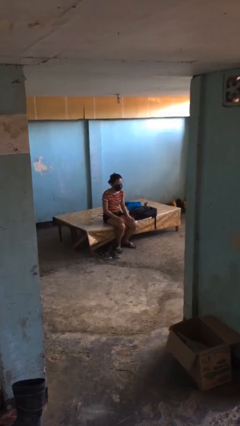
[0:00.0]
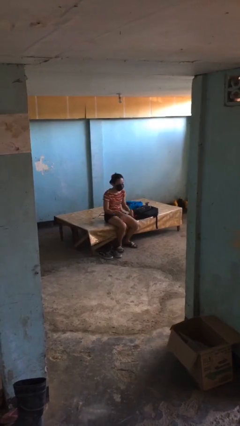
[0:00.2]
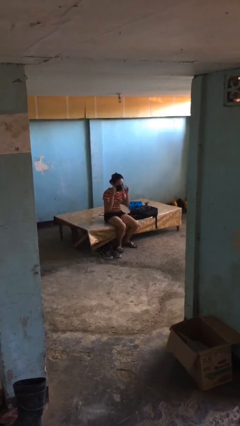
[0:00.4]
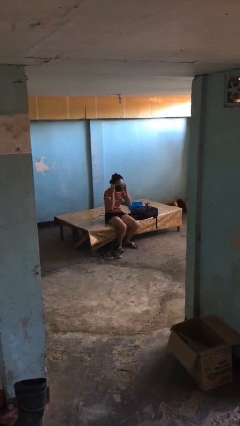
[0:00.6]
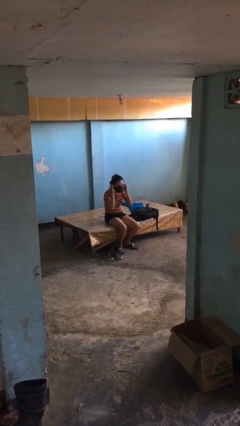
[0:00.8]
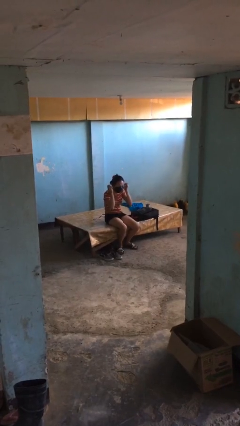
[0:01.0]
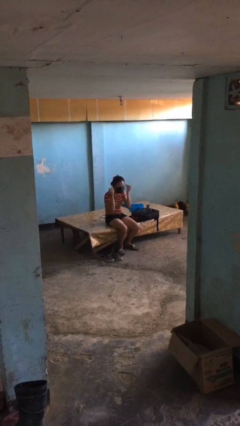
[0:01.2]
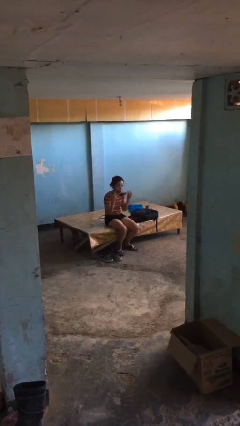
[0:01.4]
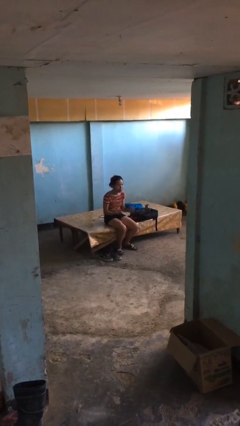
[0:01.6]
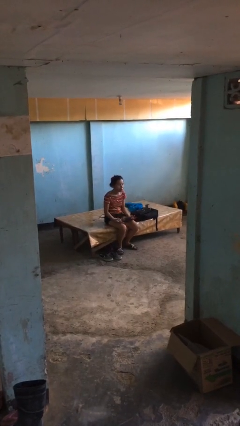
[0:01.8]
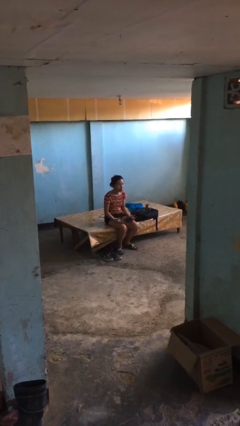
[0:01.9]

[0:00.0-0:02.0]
person takes off facemask

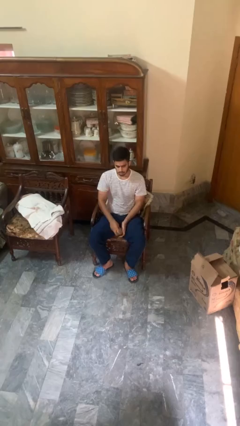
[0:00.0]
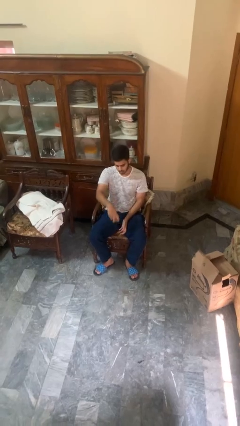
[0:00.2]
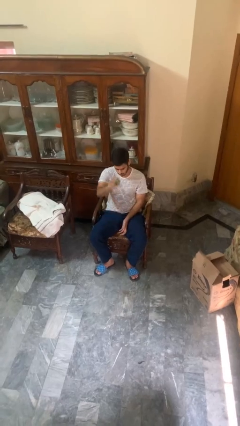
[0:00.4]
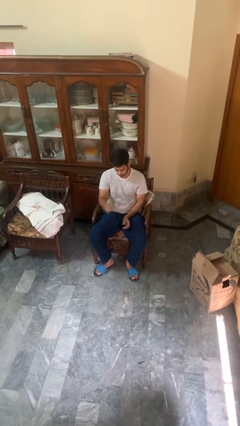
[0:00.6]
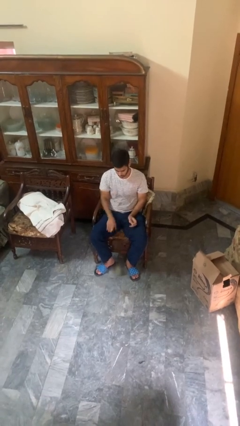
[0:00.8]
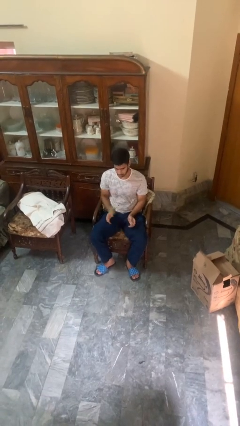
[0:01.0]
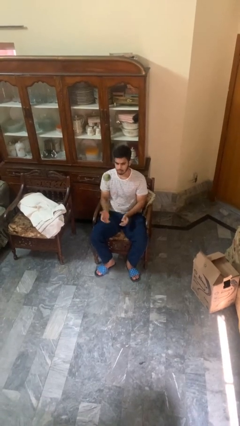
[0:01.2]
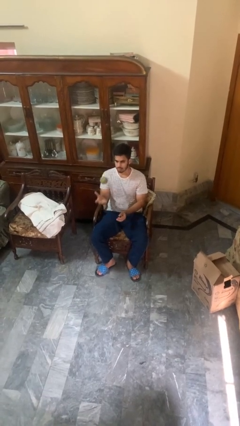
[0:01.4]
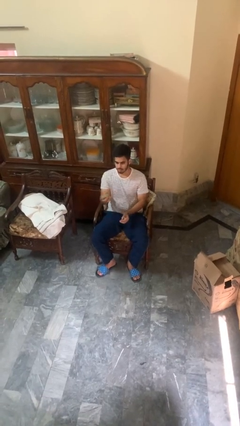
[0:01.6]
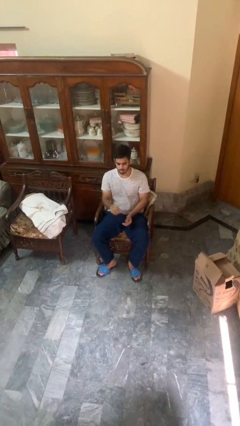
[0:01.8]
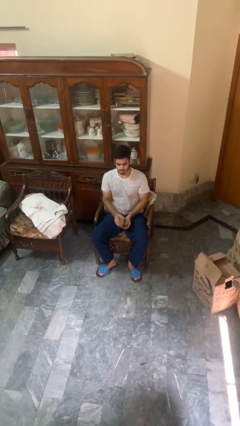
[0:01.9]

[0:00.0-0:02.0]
person bounces ball on floor

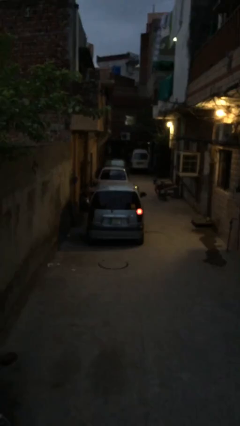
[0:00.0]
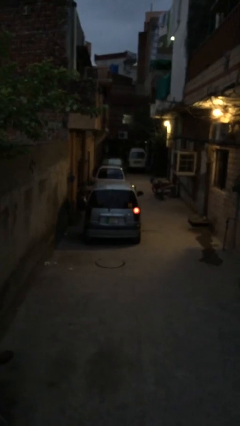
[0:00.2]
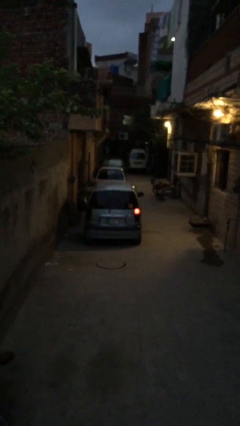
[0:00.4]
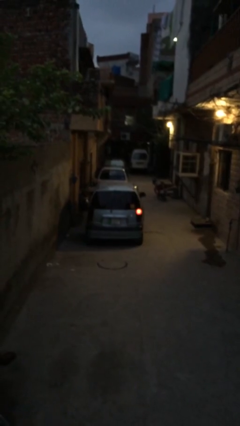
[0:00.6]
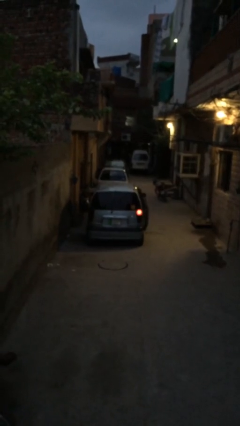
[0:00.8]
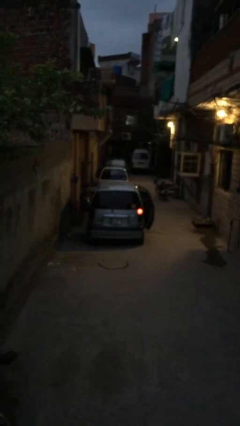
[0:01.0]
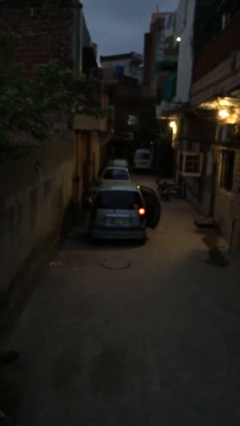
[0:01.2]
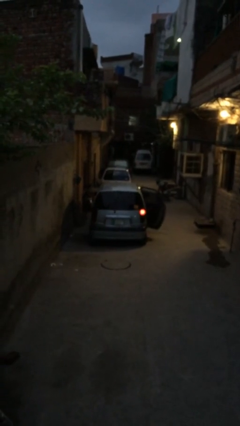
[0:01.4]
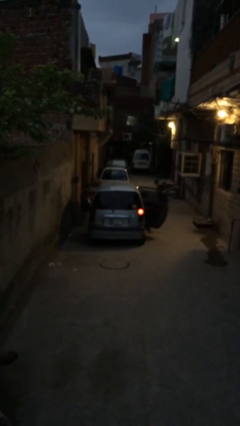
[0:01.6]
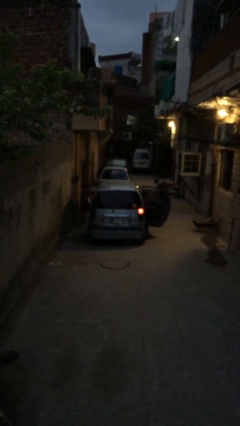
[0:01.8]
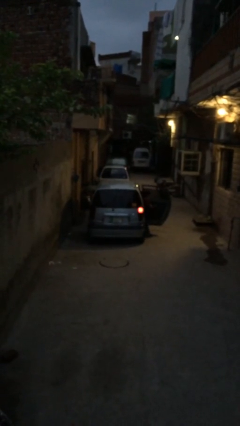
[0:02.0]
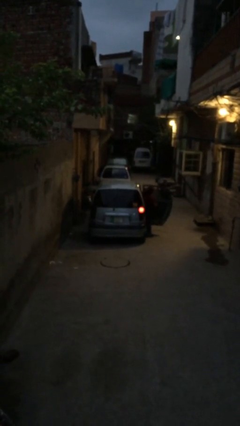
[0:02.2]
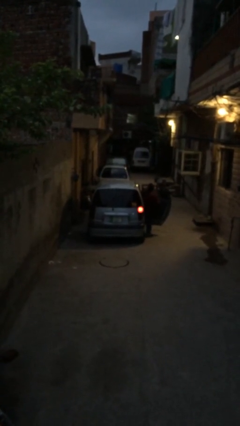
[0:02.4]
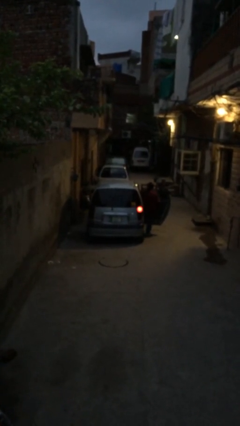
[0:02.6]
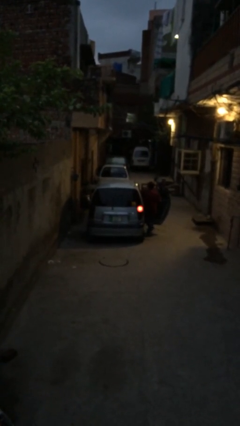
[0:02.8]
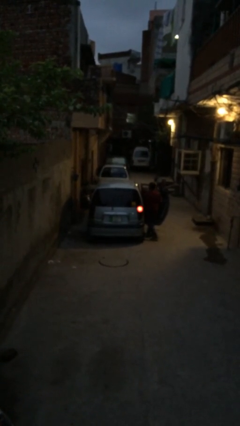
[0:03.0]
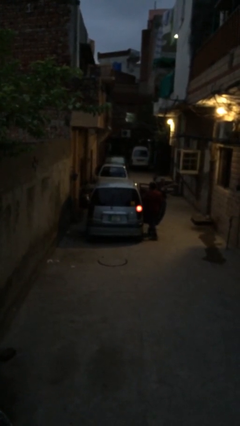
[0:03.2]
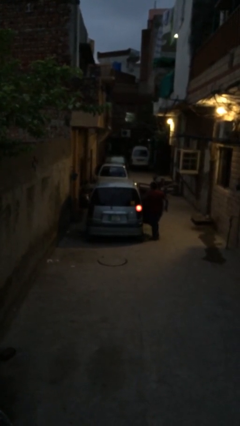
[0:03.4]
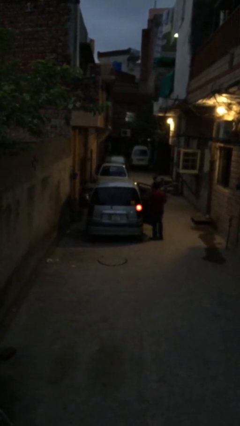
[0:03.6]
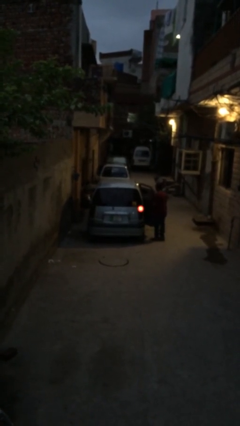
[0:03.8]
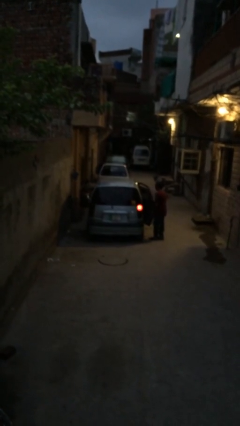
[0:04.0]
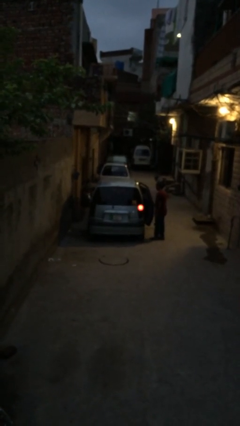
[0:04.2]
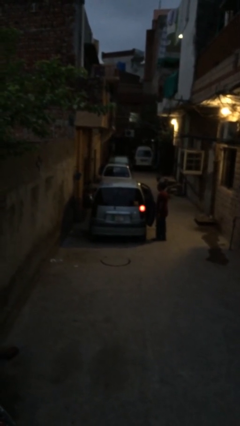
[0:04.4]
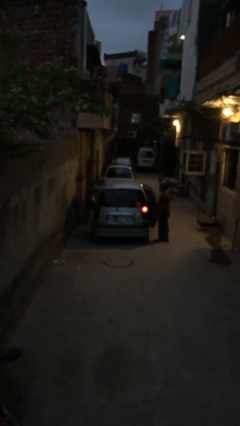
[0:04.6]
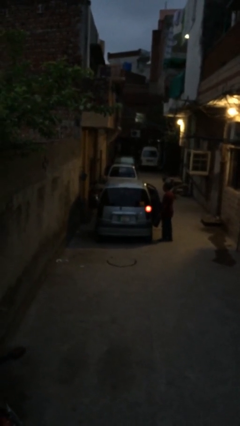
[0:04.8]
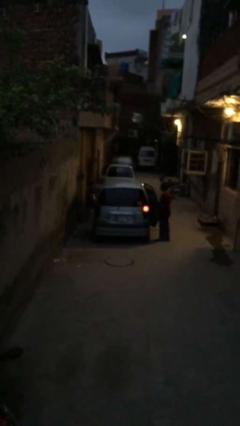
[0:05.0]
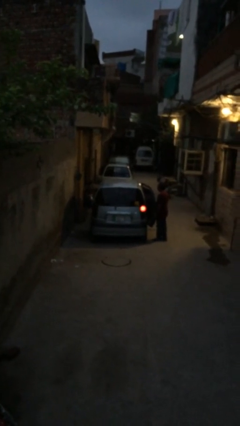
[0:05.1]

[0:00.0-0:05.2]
car drops off person

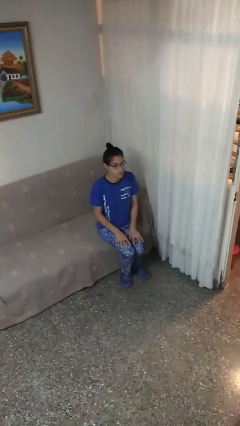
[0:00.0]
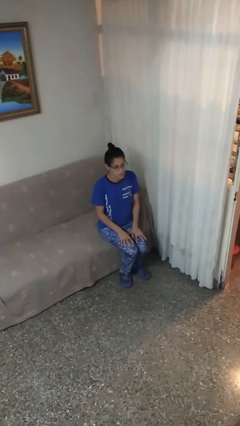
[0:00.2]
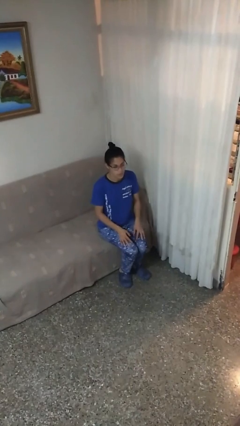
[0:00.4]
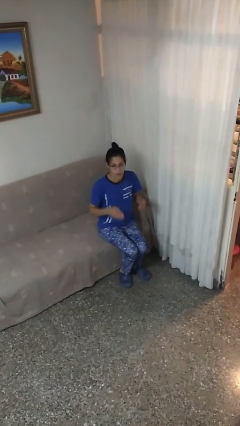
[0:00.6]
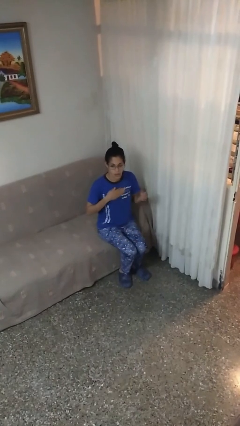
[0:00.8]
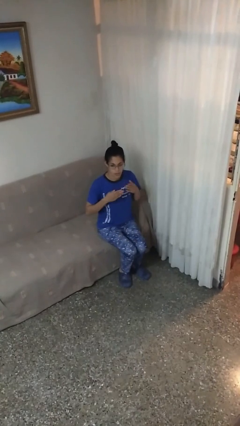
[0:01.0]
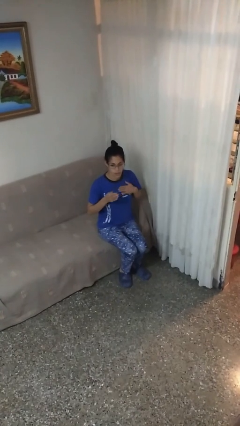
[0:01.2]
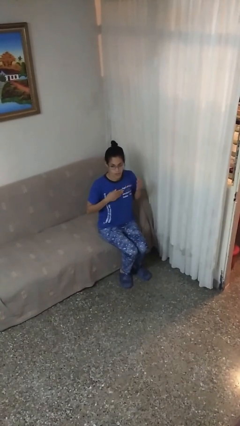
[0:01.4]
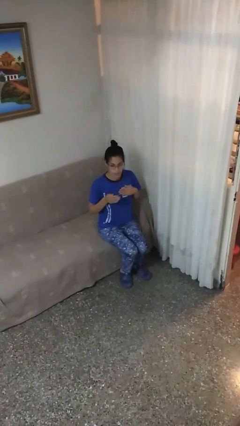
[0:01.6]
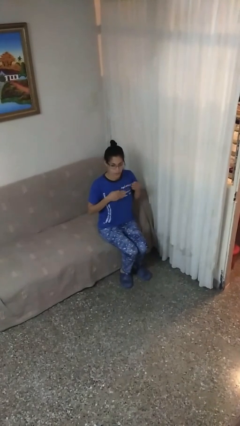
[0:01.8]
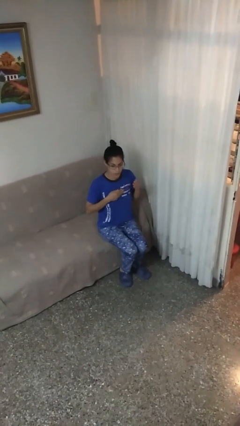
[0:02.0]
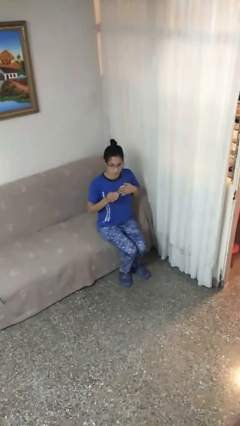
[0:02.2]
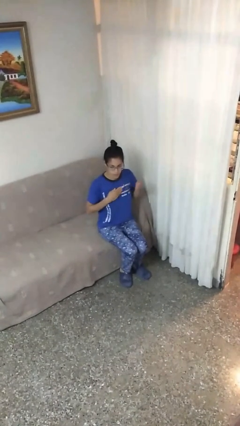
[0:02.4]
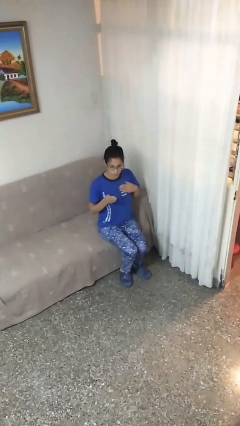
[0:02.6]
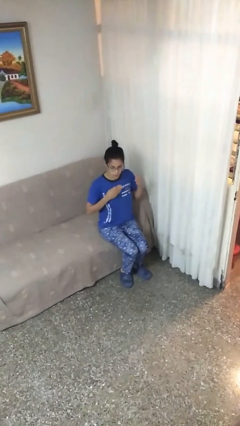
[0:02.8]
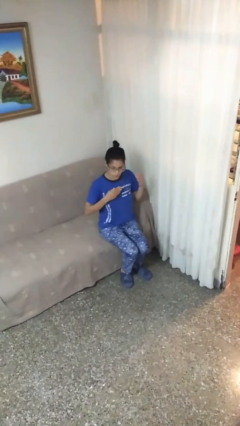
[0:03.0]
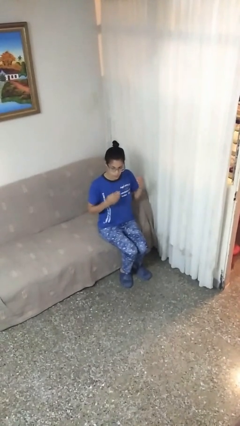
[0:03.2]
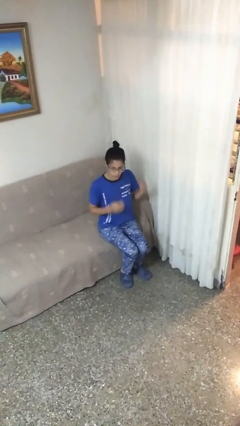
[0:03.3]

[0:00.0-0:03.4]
person drums on chest

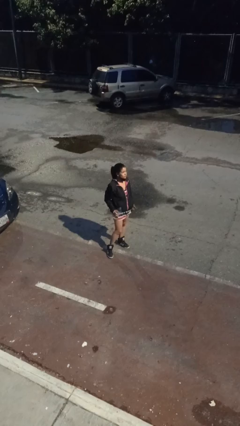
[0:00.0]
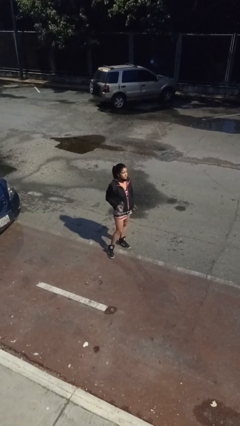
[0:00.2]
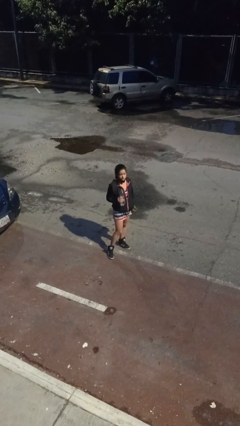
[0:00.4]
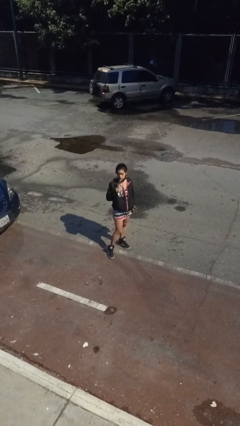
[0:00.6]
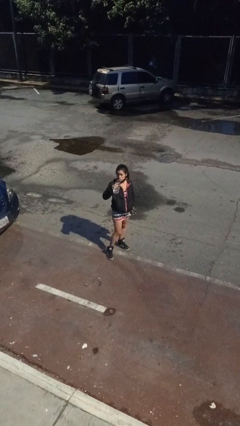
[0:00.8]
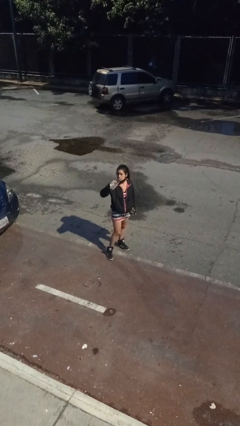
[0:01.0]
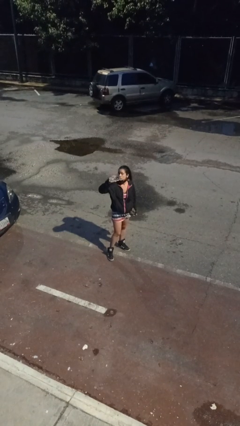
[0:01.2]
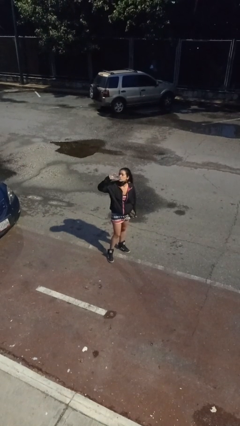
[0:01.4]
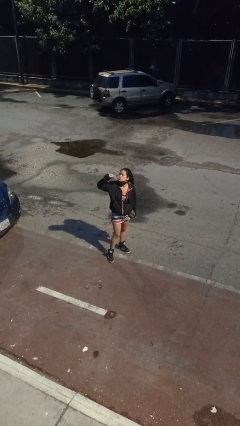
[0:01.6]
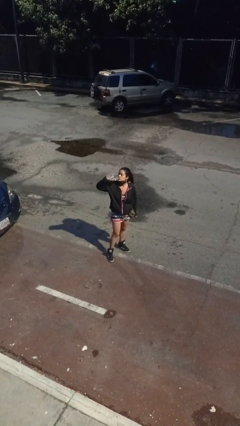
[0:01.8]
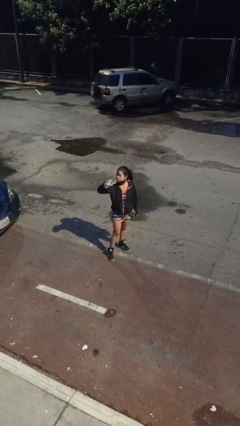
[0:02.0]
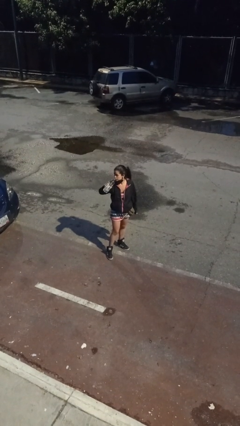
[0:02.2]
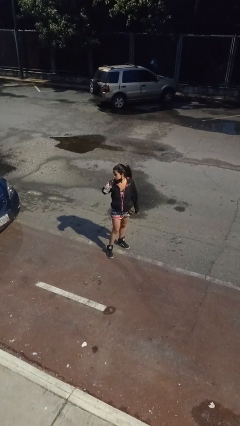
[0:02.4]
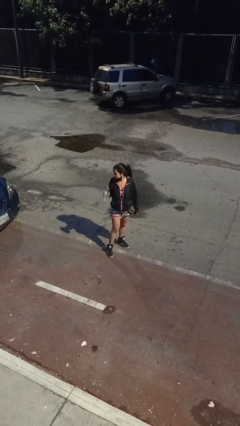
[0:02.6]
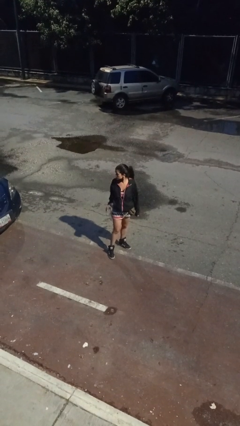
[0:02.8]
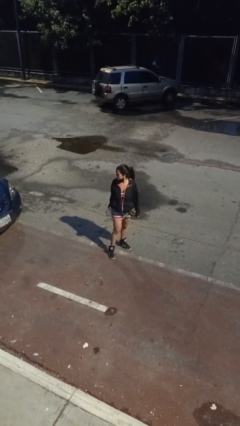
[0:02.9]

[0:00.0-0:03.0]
person drinks from bottle

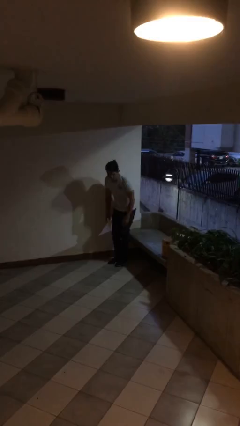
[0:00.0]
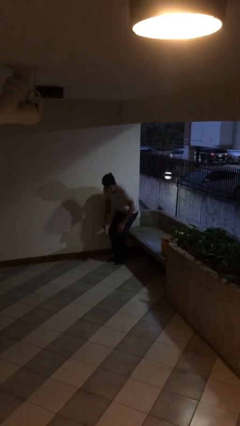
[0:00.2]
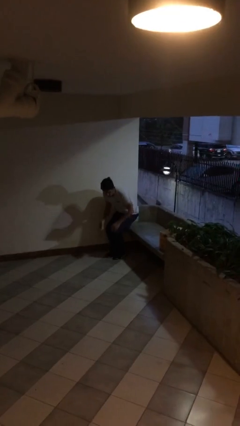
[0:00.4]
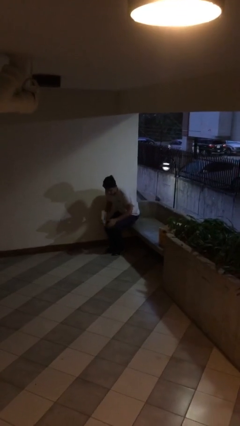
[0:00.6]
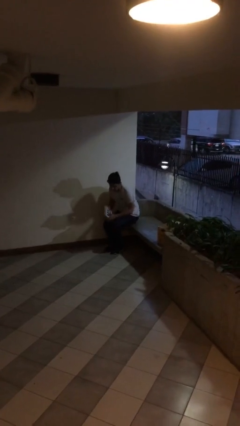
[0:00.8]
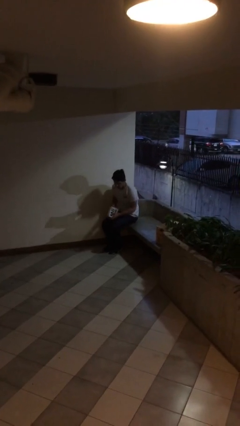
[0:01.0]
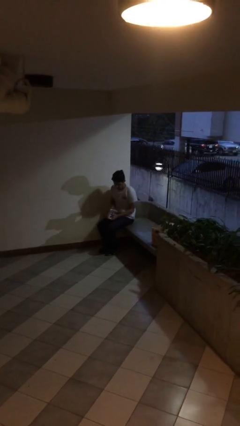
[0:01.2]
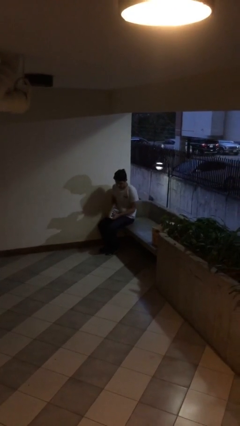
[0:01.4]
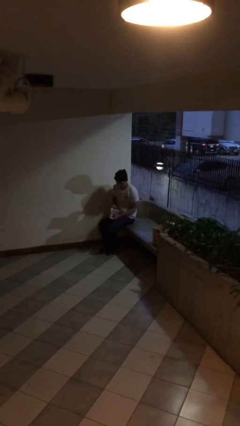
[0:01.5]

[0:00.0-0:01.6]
person sits down
